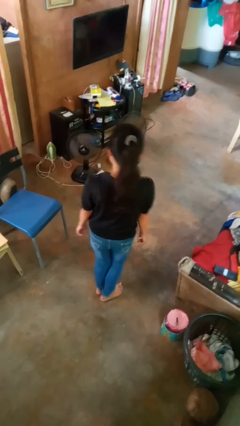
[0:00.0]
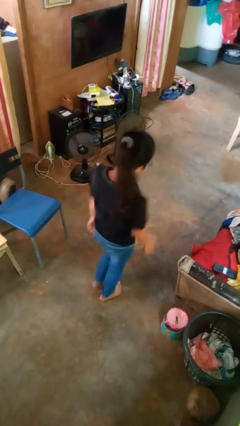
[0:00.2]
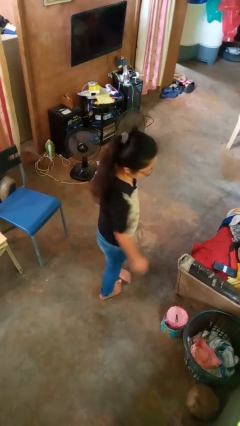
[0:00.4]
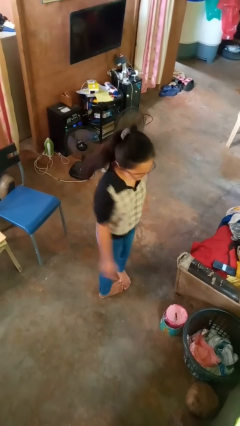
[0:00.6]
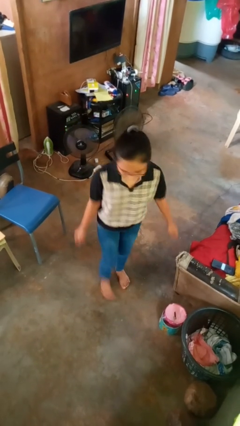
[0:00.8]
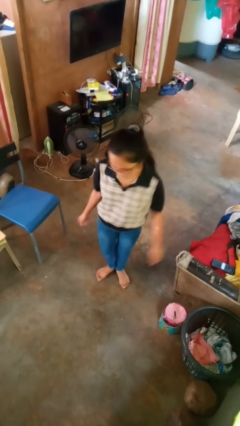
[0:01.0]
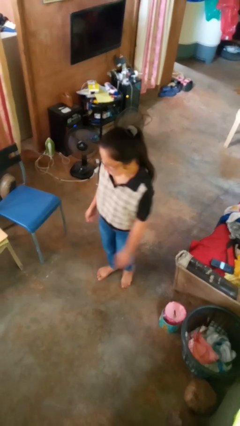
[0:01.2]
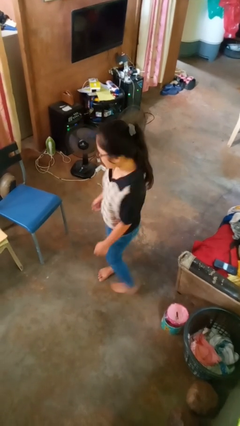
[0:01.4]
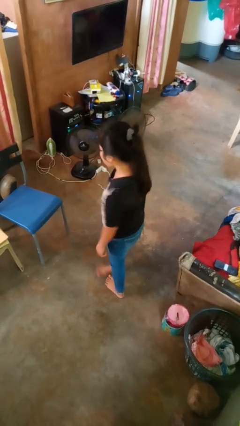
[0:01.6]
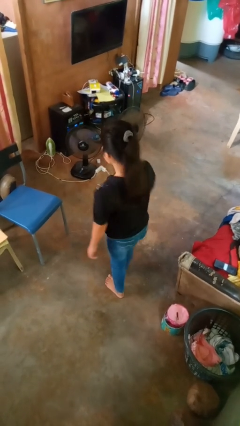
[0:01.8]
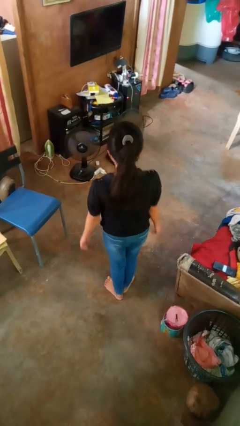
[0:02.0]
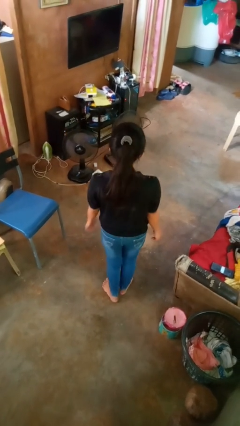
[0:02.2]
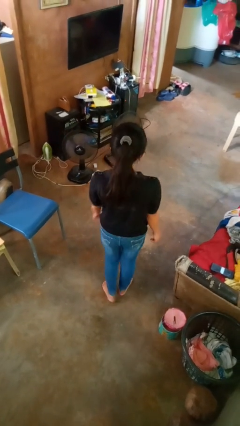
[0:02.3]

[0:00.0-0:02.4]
person twirls

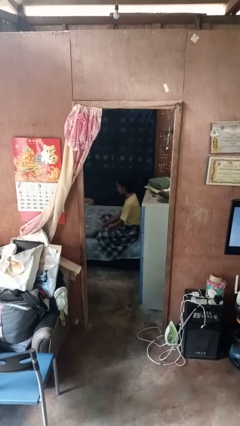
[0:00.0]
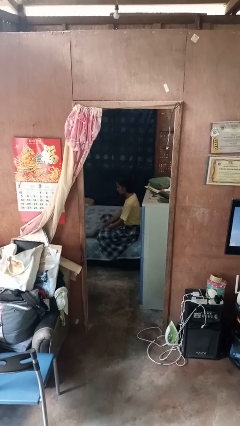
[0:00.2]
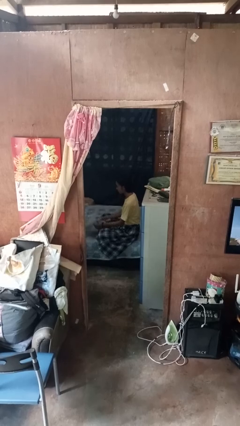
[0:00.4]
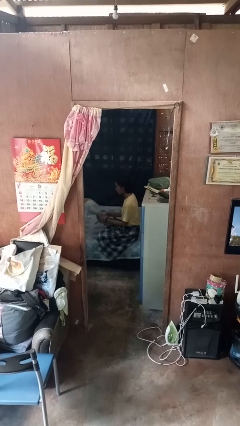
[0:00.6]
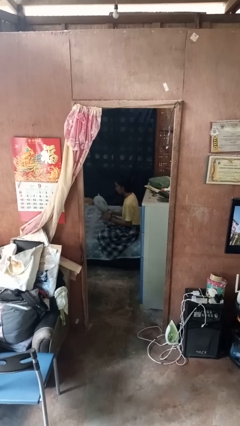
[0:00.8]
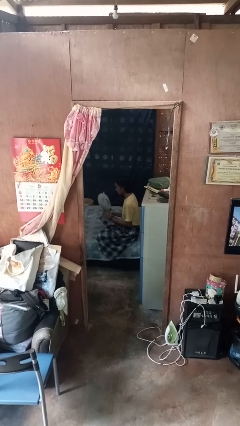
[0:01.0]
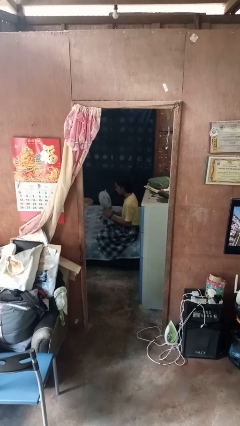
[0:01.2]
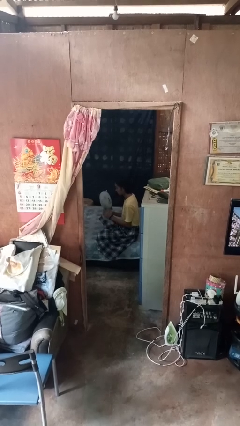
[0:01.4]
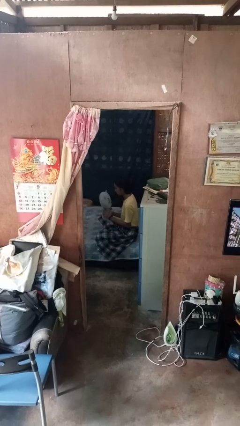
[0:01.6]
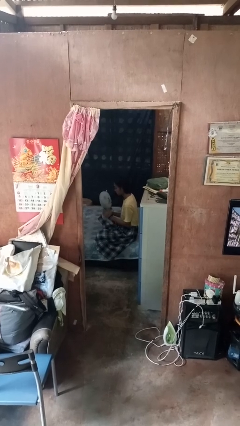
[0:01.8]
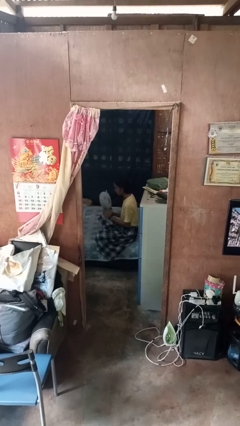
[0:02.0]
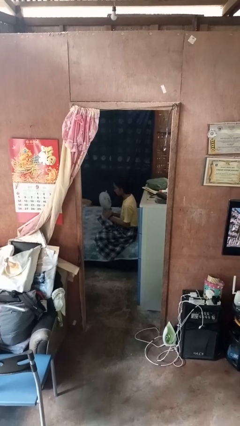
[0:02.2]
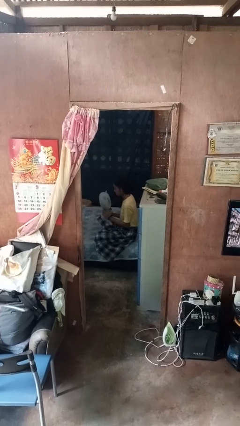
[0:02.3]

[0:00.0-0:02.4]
person picks up object from bed

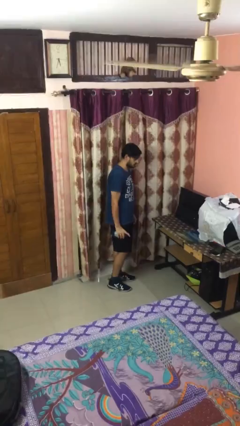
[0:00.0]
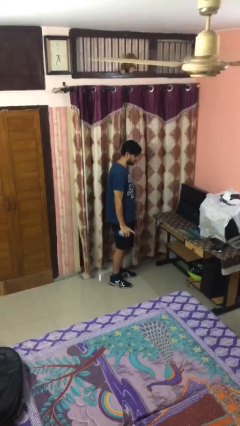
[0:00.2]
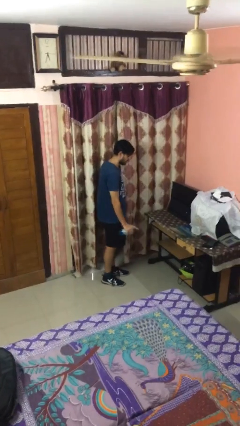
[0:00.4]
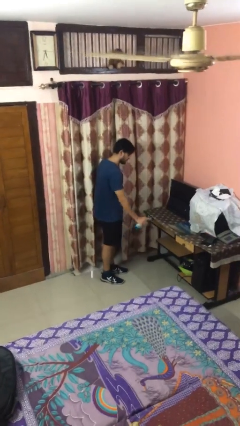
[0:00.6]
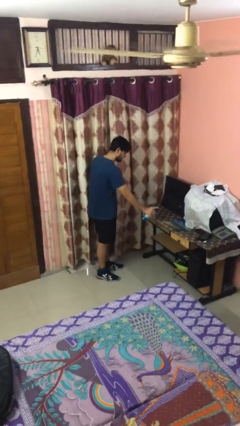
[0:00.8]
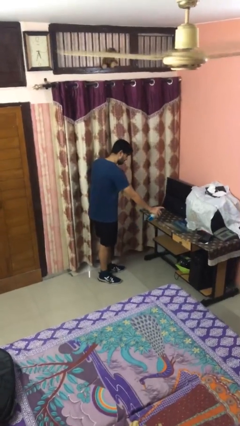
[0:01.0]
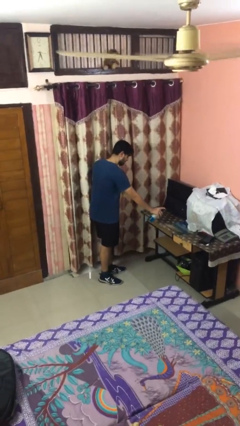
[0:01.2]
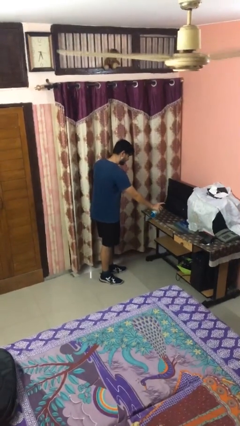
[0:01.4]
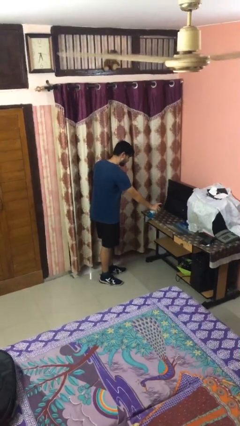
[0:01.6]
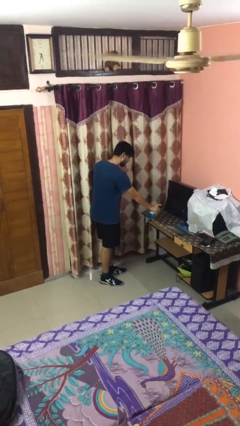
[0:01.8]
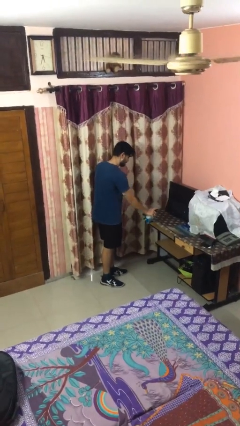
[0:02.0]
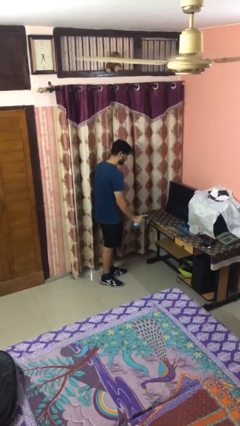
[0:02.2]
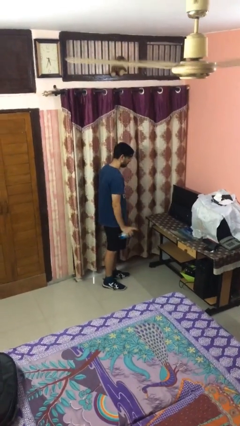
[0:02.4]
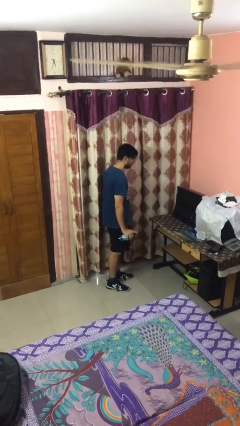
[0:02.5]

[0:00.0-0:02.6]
person sprays from bottle

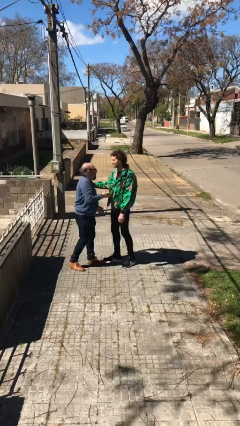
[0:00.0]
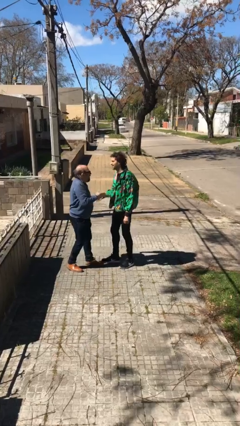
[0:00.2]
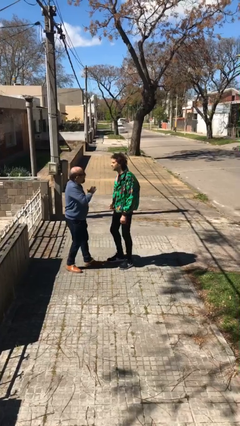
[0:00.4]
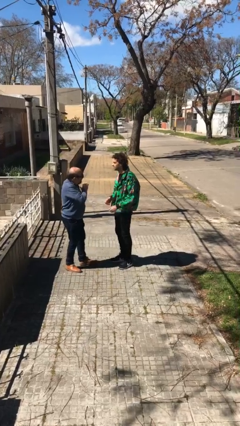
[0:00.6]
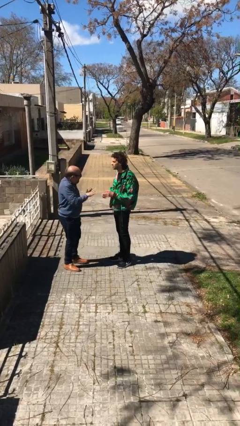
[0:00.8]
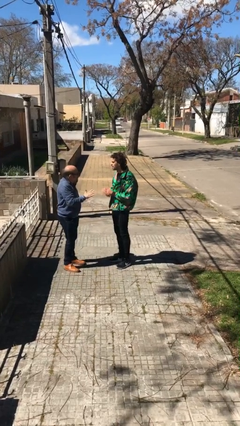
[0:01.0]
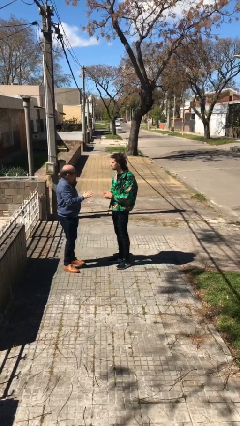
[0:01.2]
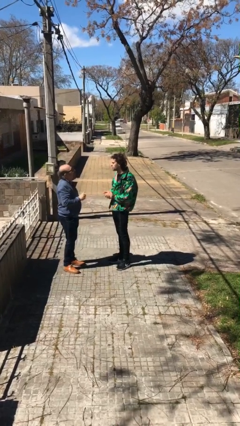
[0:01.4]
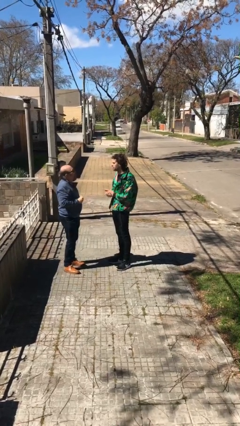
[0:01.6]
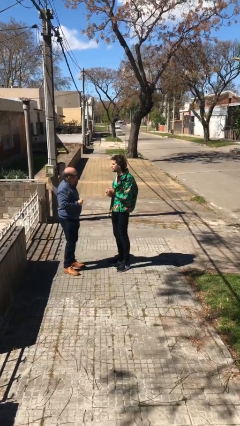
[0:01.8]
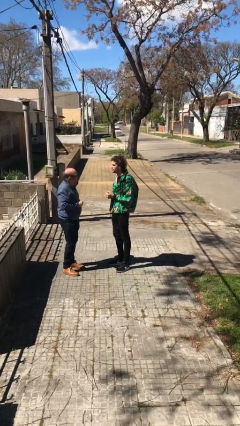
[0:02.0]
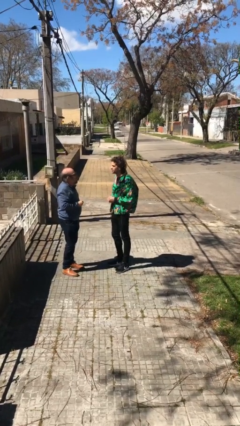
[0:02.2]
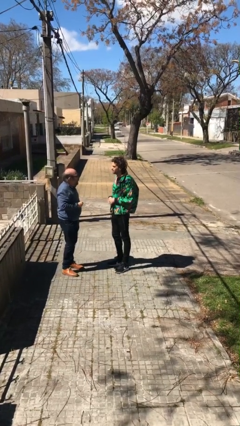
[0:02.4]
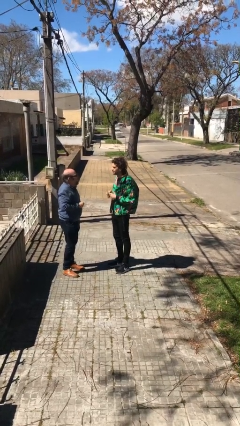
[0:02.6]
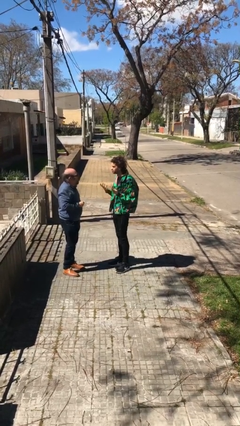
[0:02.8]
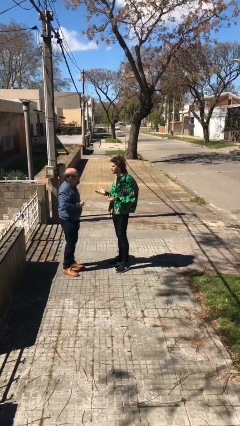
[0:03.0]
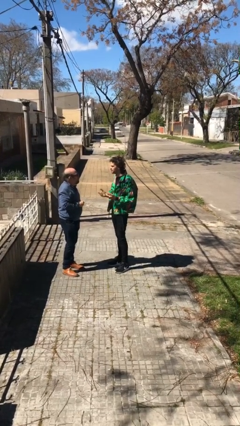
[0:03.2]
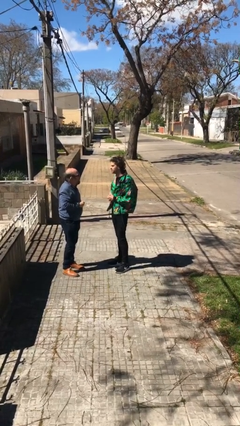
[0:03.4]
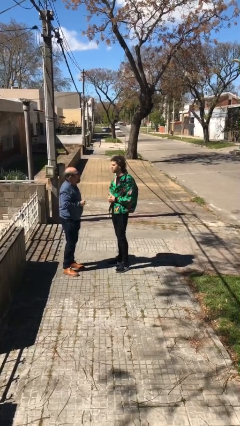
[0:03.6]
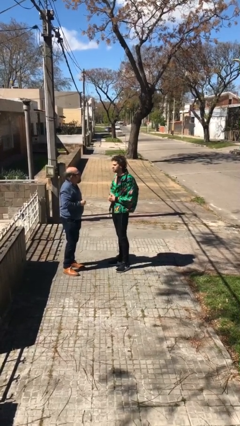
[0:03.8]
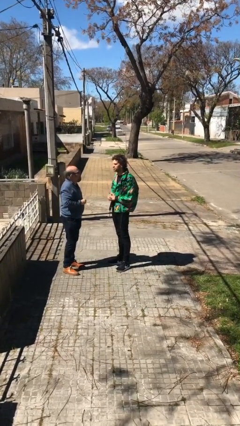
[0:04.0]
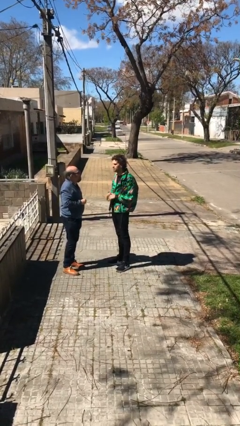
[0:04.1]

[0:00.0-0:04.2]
person talks to person

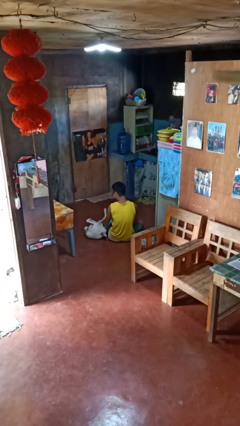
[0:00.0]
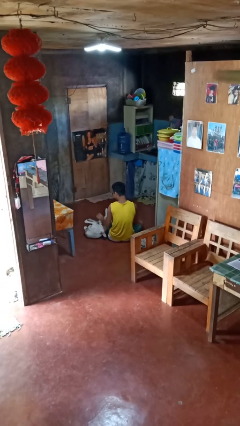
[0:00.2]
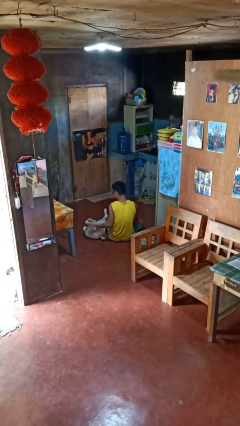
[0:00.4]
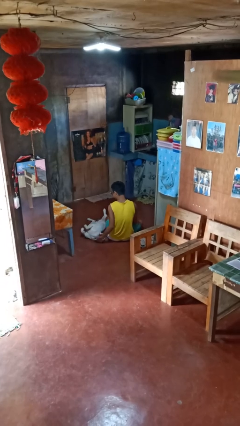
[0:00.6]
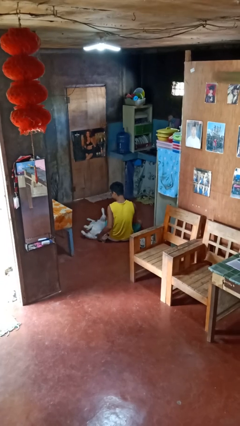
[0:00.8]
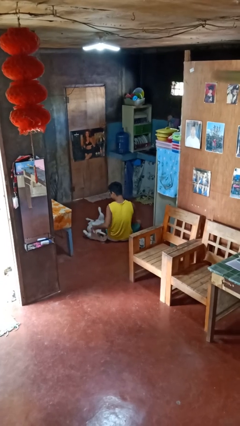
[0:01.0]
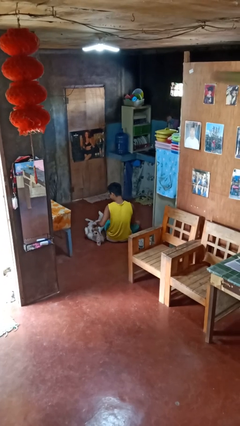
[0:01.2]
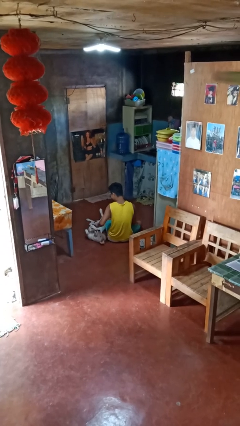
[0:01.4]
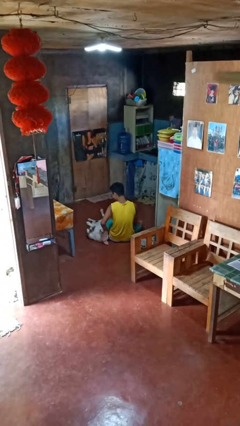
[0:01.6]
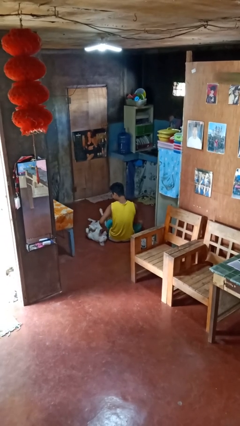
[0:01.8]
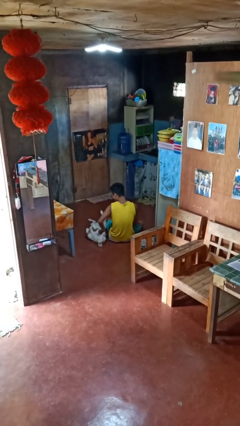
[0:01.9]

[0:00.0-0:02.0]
person pets dog

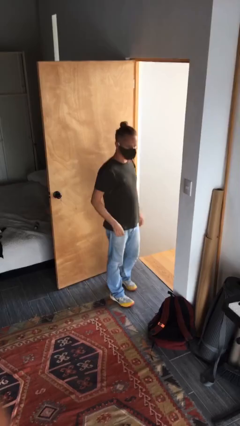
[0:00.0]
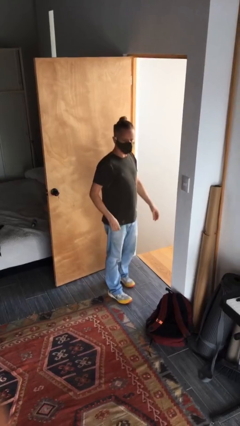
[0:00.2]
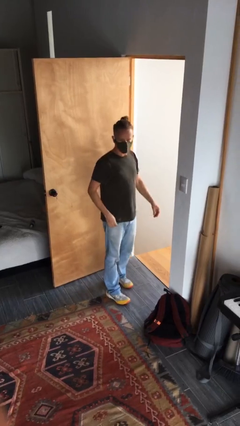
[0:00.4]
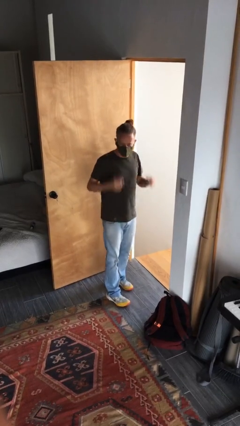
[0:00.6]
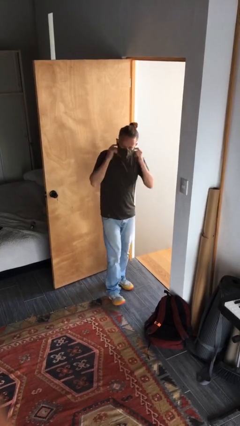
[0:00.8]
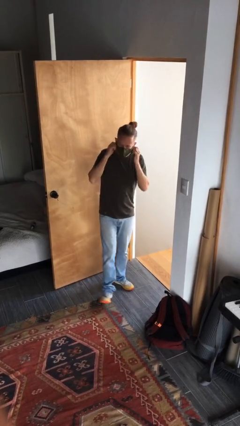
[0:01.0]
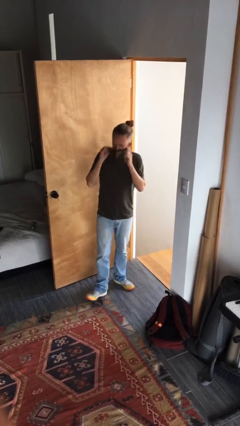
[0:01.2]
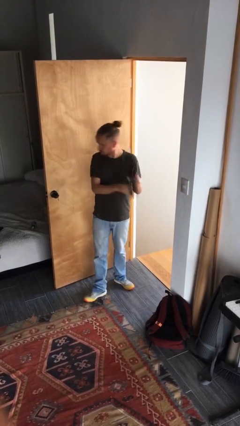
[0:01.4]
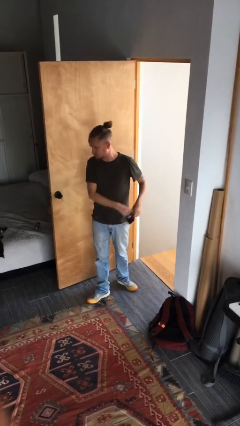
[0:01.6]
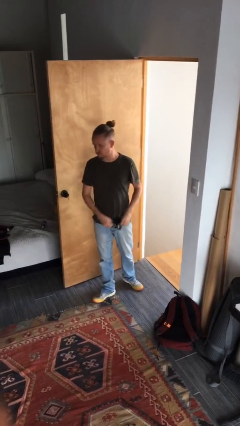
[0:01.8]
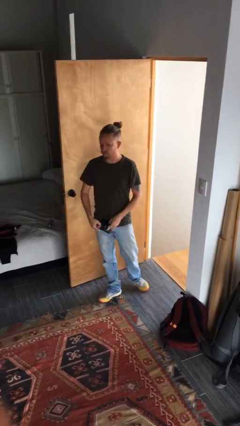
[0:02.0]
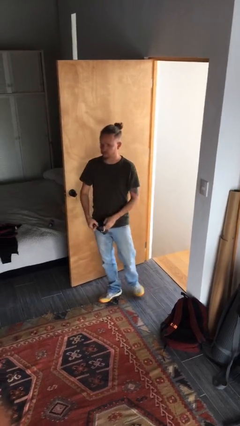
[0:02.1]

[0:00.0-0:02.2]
person takes off facemask

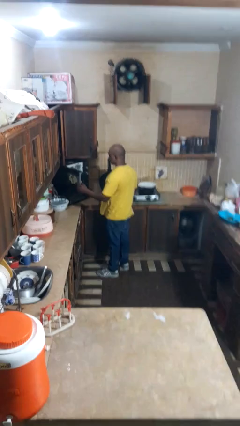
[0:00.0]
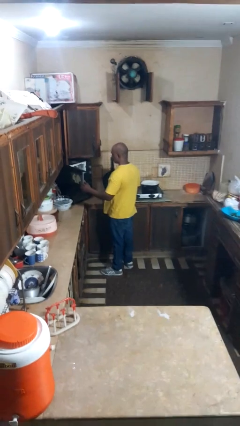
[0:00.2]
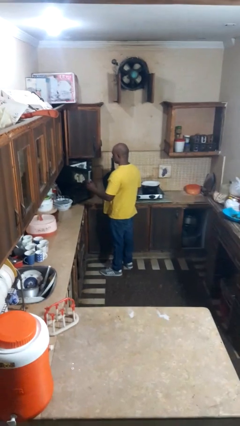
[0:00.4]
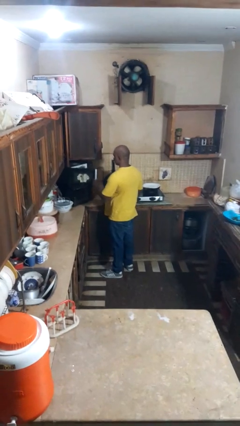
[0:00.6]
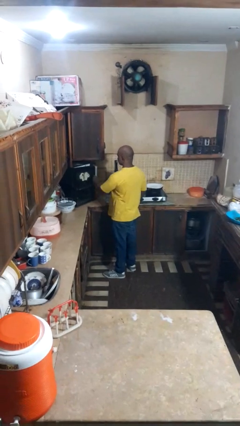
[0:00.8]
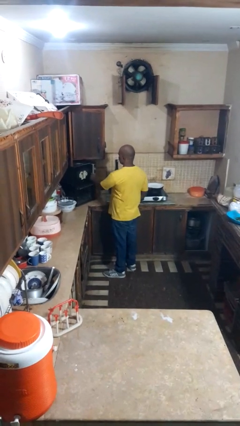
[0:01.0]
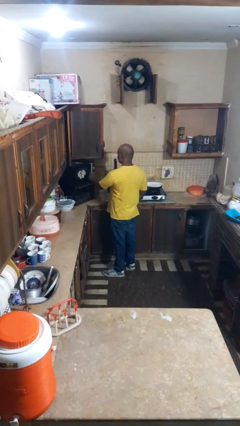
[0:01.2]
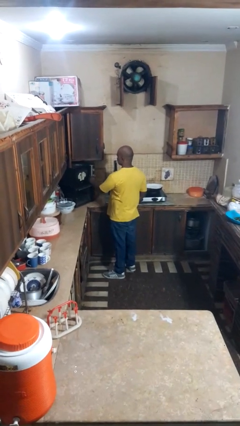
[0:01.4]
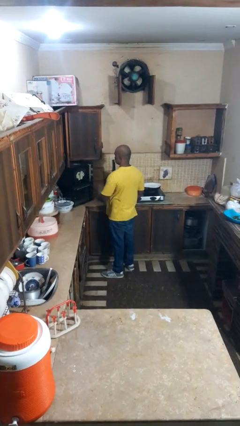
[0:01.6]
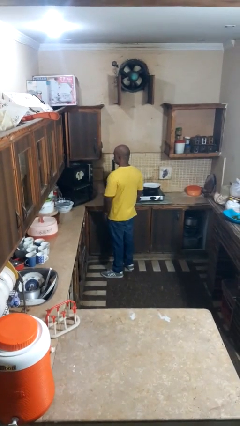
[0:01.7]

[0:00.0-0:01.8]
person closes microwave
